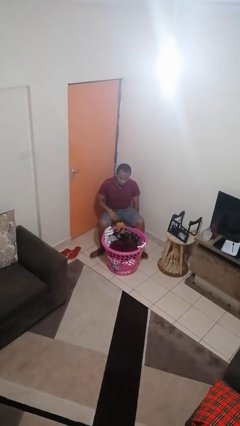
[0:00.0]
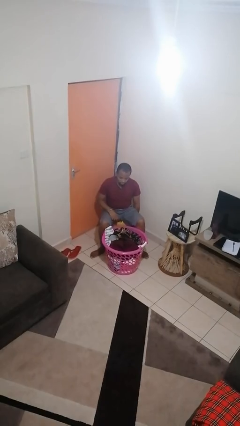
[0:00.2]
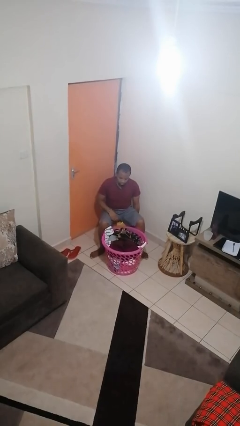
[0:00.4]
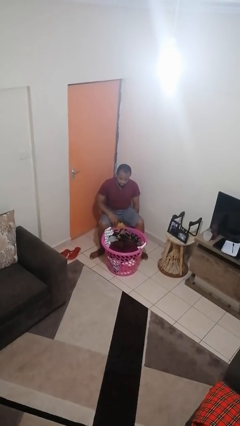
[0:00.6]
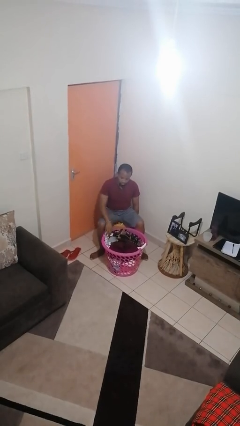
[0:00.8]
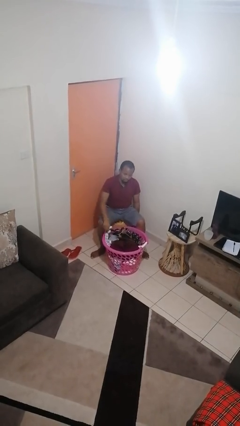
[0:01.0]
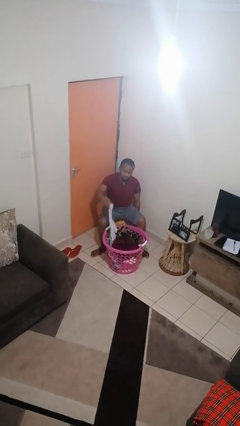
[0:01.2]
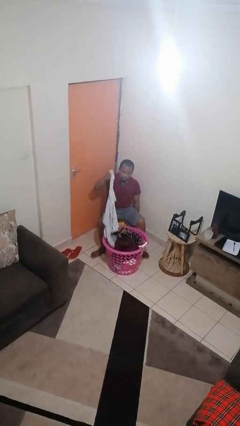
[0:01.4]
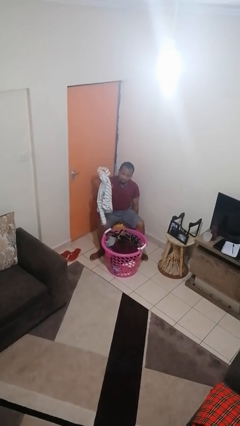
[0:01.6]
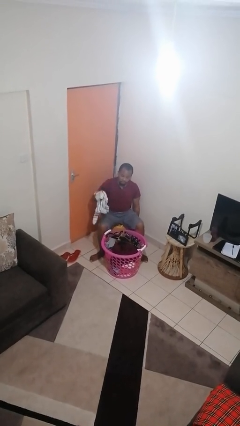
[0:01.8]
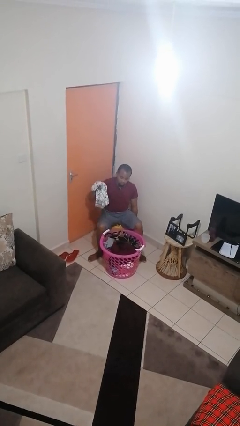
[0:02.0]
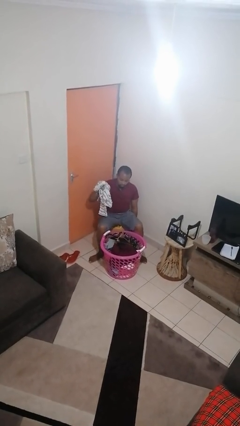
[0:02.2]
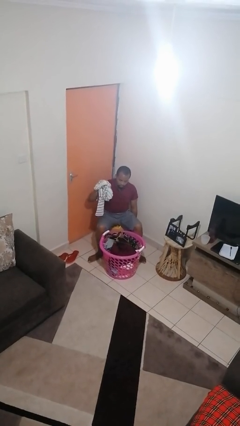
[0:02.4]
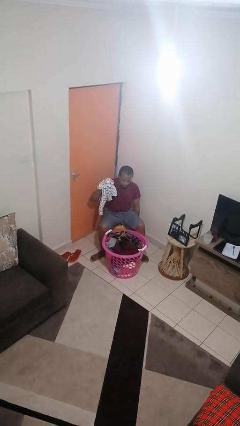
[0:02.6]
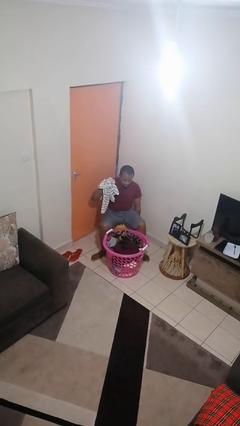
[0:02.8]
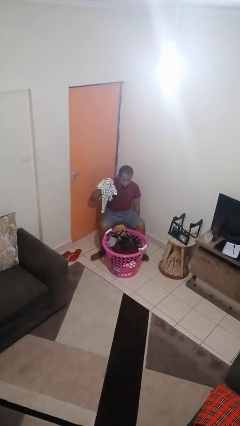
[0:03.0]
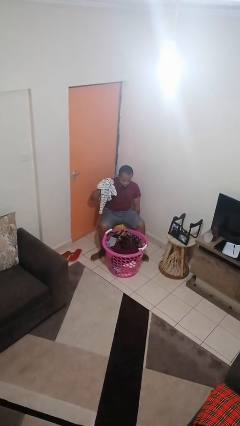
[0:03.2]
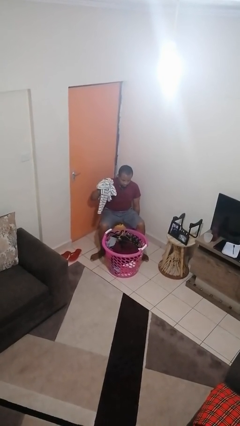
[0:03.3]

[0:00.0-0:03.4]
person takes object from basket

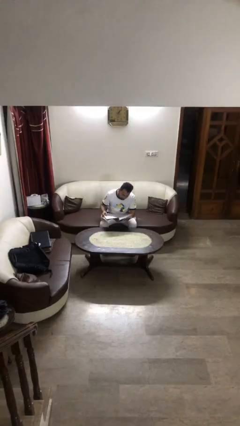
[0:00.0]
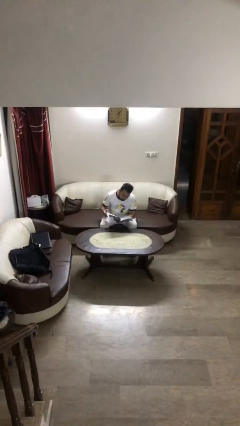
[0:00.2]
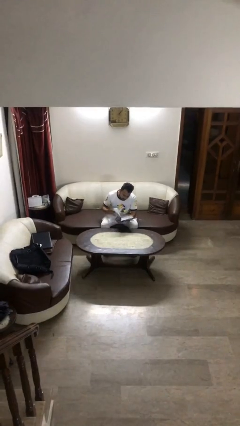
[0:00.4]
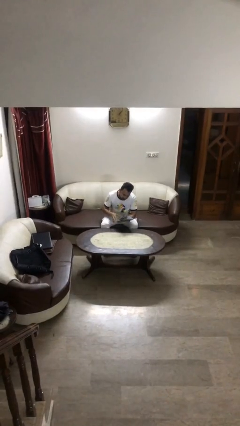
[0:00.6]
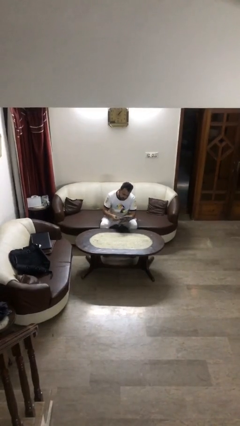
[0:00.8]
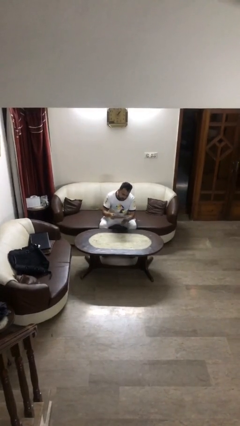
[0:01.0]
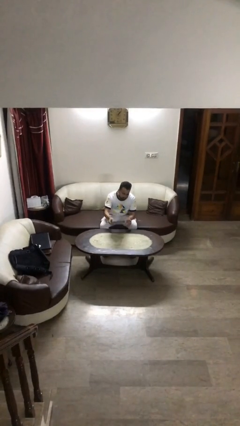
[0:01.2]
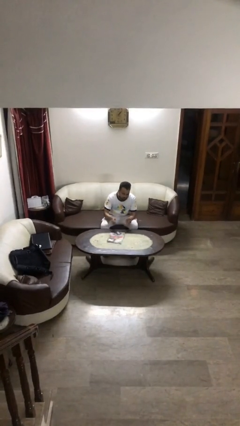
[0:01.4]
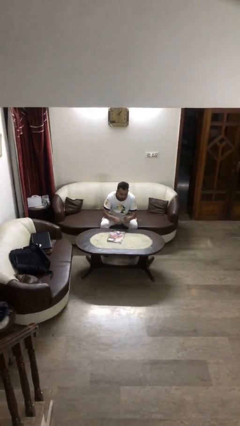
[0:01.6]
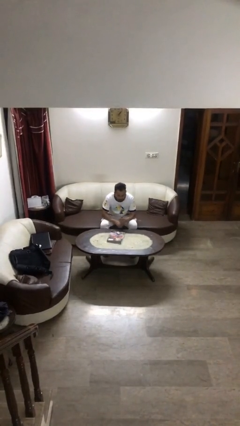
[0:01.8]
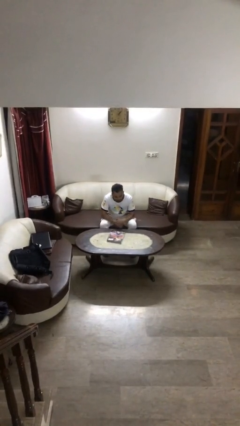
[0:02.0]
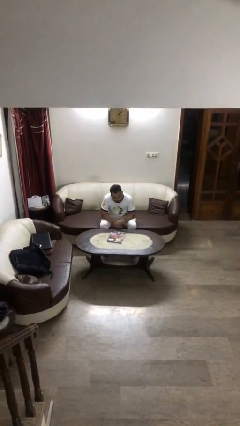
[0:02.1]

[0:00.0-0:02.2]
person puts down object on table

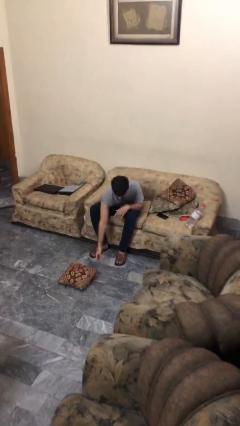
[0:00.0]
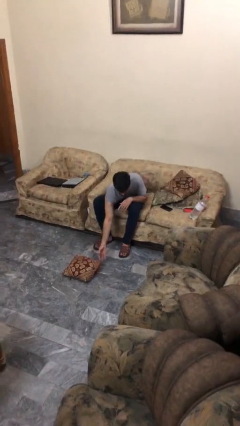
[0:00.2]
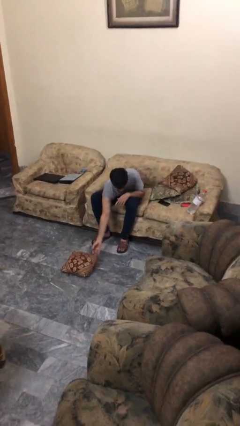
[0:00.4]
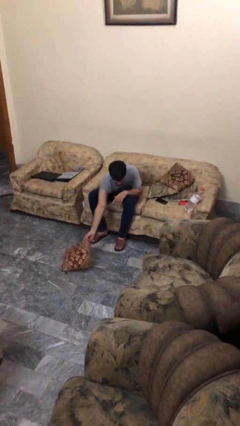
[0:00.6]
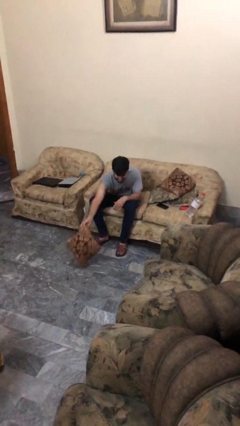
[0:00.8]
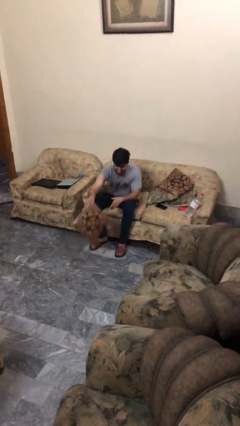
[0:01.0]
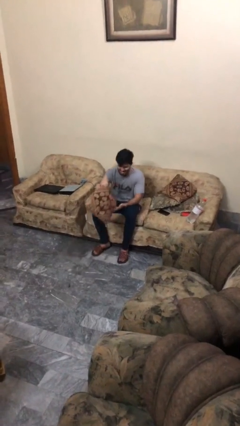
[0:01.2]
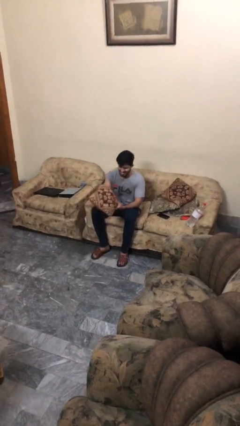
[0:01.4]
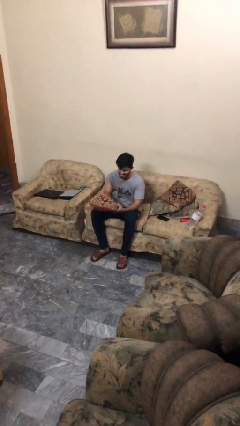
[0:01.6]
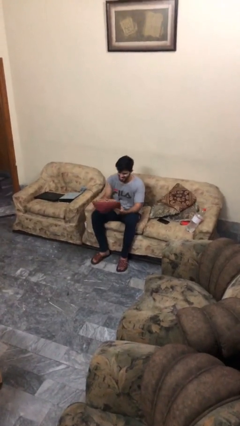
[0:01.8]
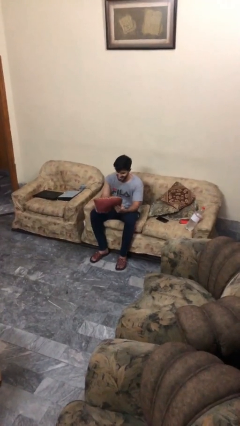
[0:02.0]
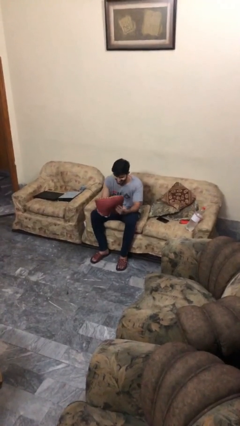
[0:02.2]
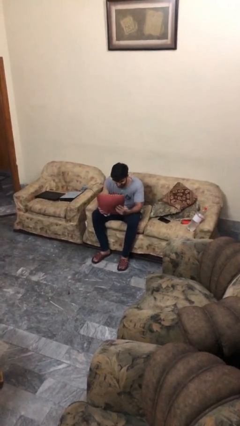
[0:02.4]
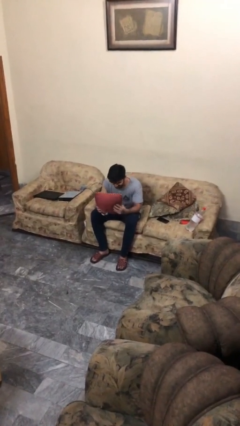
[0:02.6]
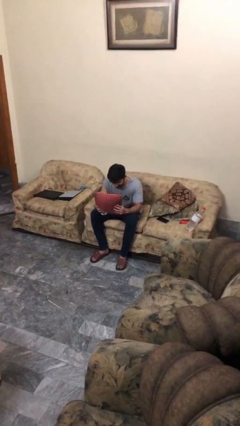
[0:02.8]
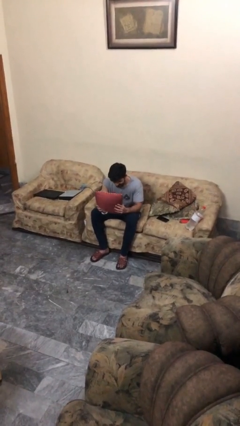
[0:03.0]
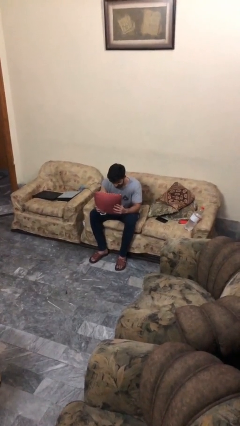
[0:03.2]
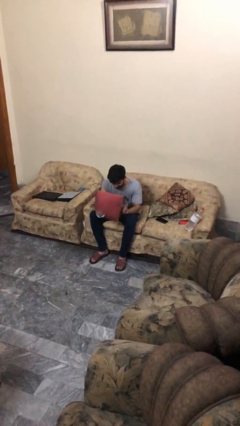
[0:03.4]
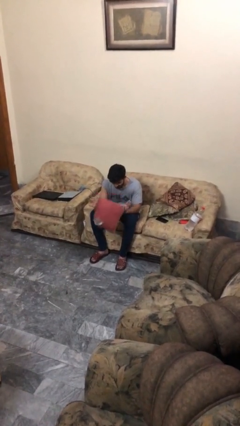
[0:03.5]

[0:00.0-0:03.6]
person picks up object from floor

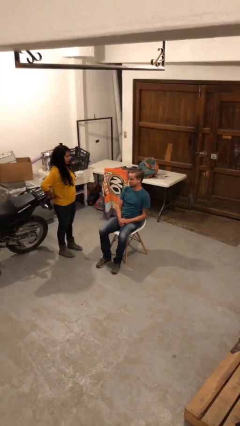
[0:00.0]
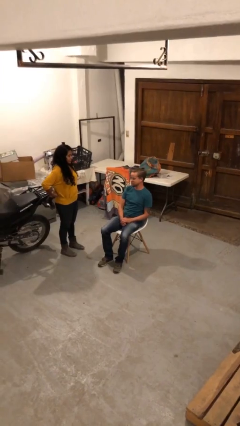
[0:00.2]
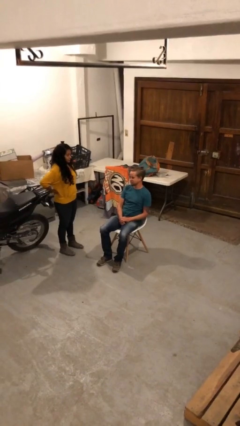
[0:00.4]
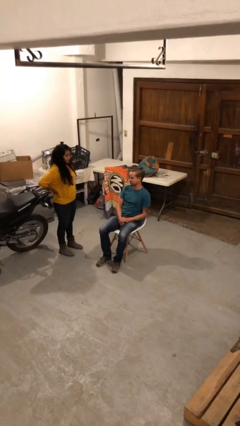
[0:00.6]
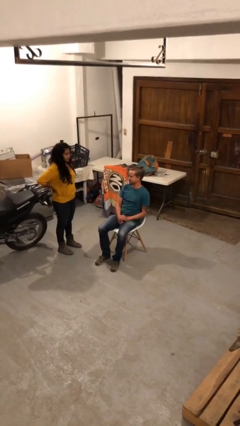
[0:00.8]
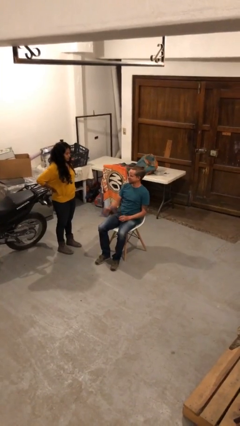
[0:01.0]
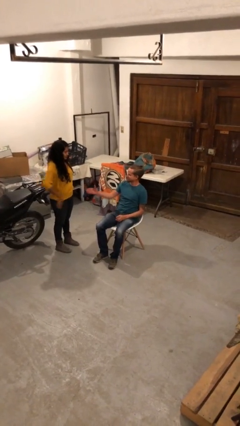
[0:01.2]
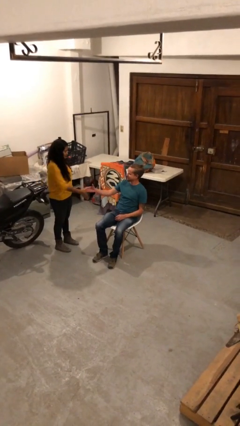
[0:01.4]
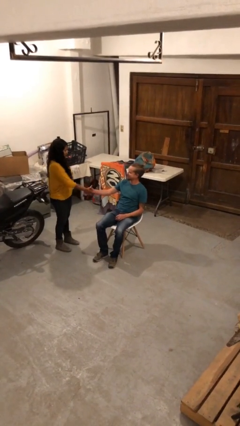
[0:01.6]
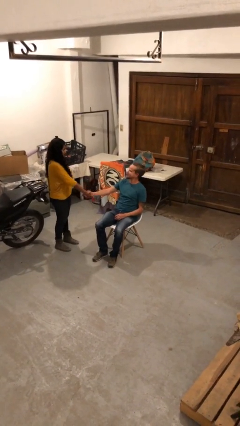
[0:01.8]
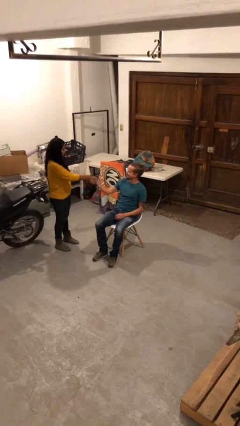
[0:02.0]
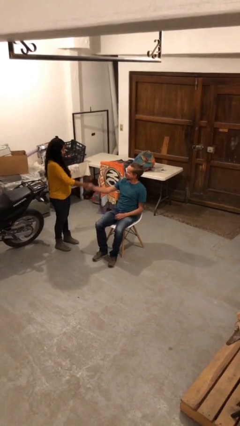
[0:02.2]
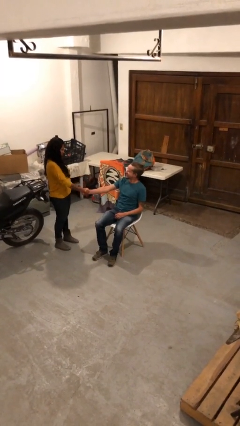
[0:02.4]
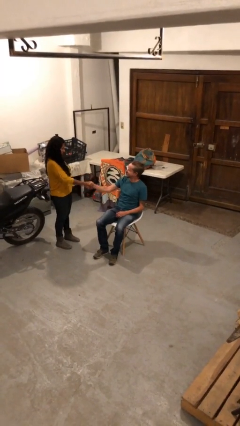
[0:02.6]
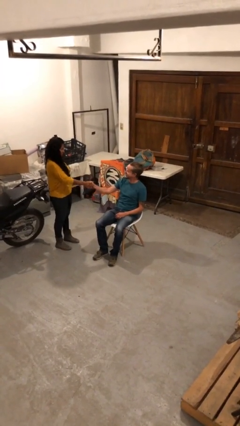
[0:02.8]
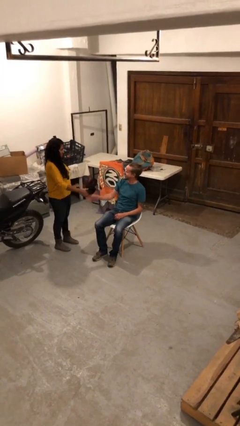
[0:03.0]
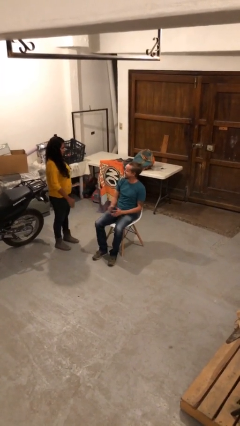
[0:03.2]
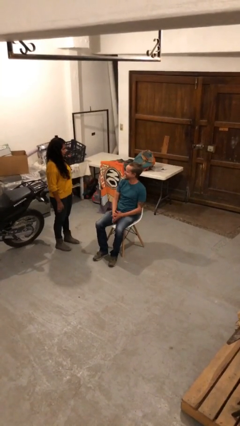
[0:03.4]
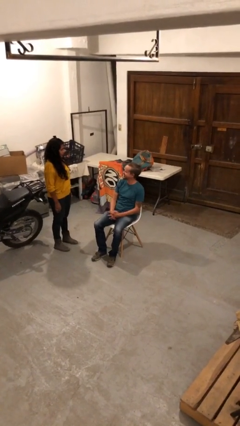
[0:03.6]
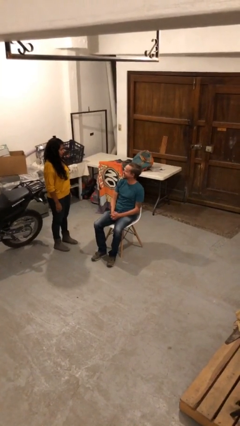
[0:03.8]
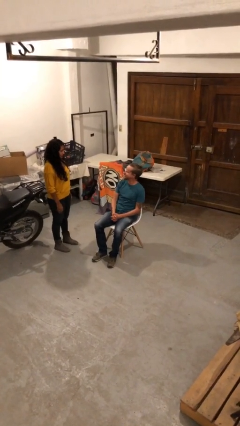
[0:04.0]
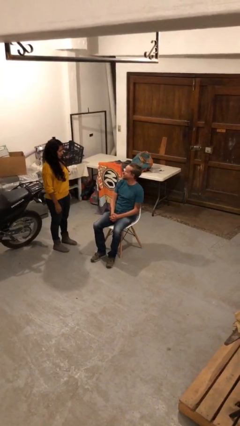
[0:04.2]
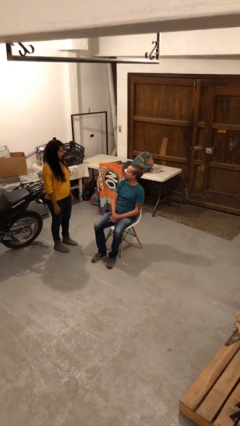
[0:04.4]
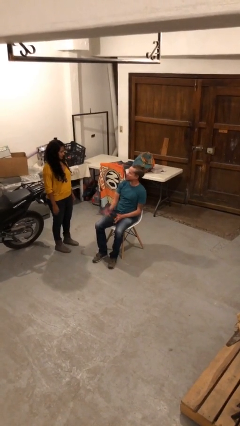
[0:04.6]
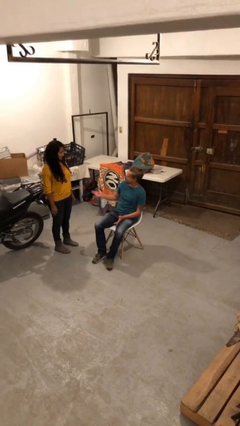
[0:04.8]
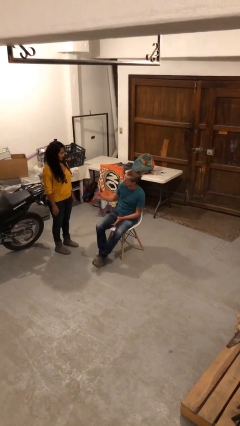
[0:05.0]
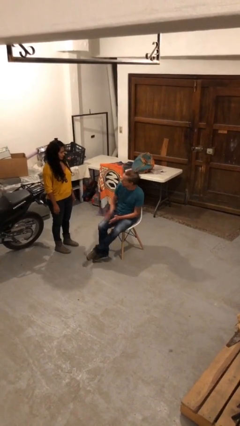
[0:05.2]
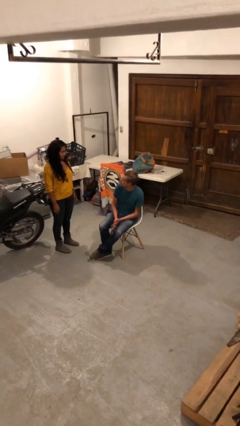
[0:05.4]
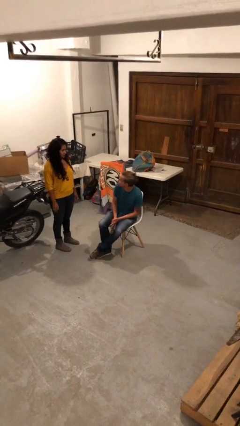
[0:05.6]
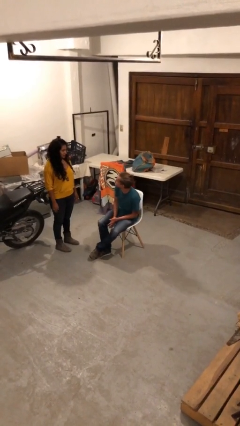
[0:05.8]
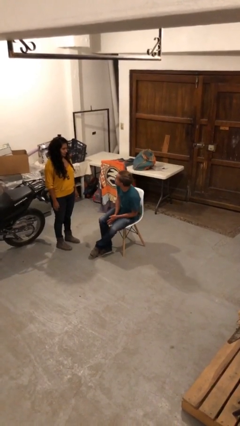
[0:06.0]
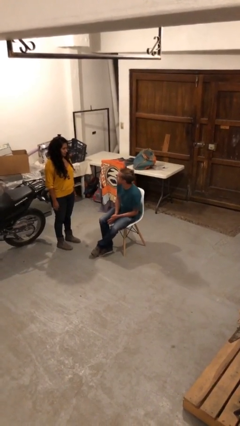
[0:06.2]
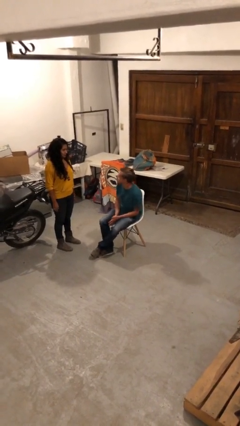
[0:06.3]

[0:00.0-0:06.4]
person shakes hand

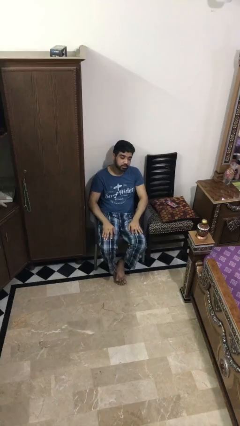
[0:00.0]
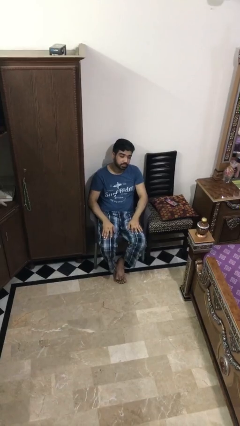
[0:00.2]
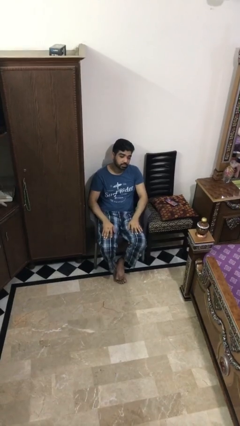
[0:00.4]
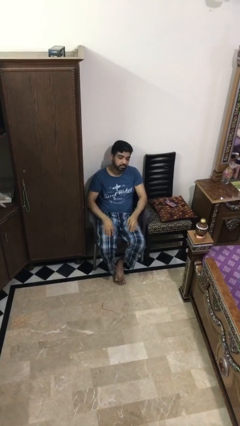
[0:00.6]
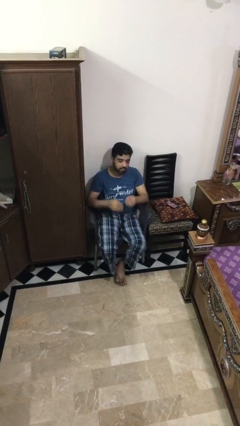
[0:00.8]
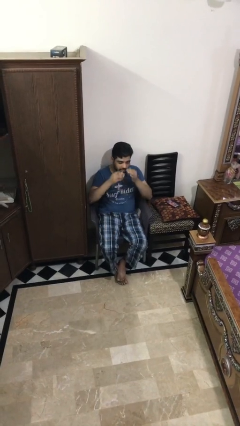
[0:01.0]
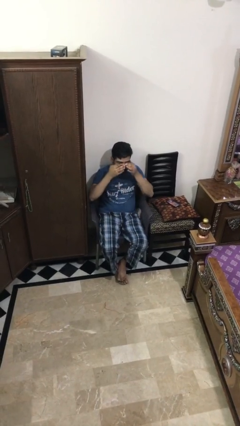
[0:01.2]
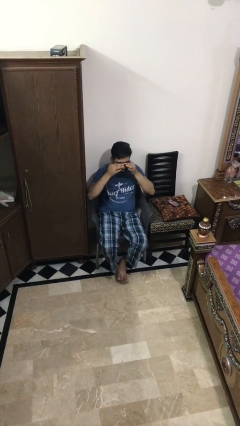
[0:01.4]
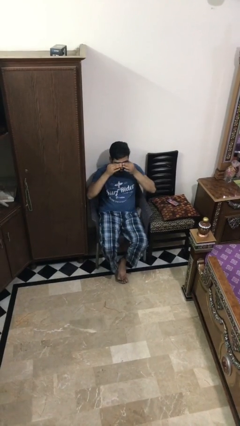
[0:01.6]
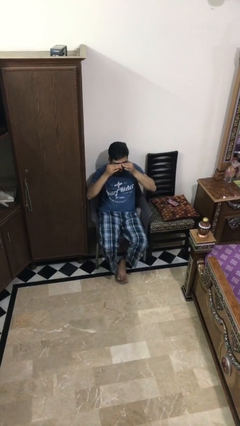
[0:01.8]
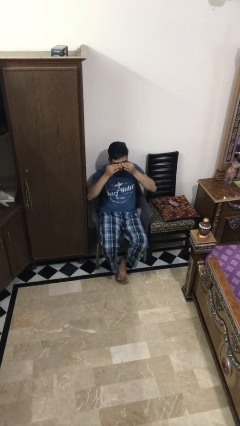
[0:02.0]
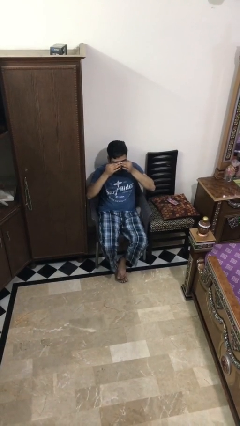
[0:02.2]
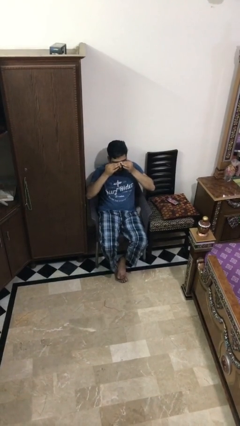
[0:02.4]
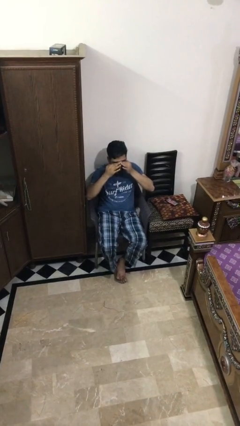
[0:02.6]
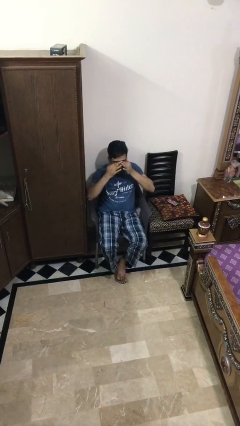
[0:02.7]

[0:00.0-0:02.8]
person rubs eyes
